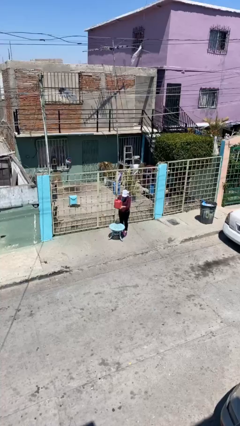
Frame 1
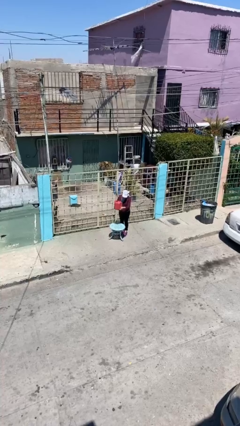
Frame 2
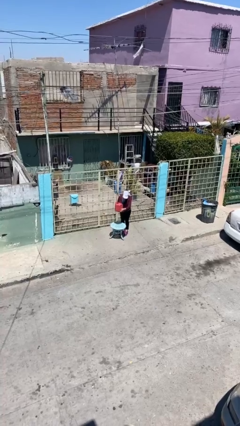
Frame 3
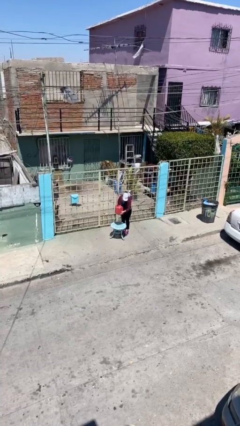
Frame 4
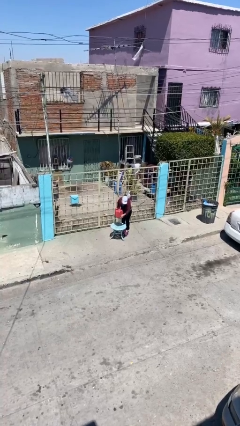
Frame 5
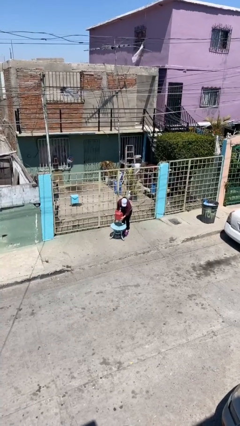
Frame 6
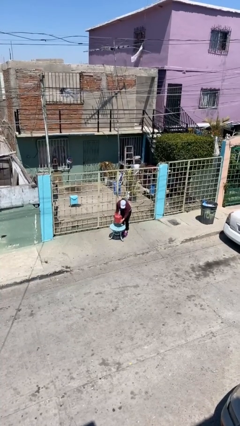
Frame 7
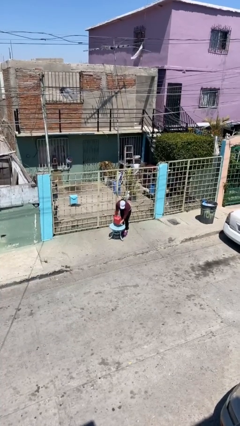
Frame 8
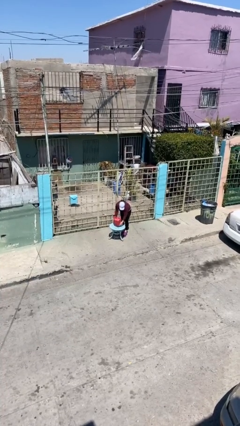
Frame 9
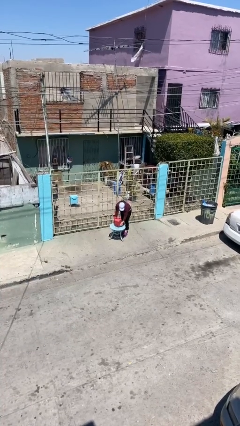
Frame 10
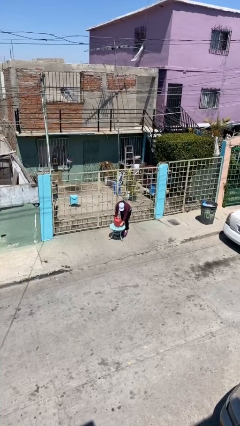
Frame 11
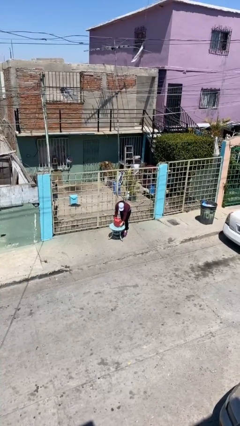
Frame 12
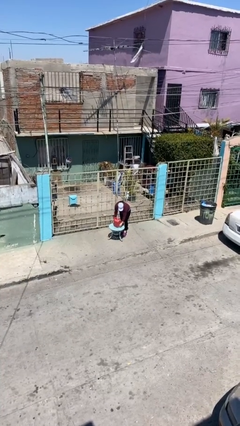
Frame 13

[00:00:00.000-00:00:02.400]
person puts down object on table

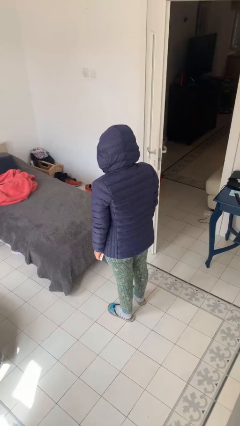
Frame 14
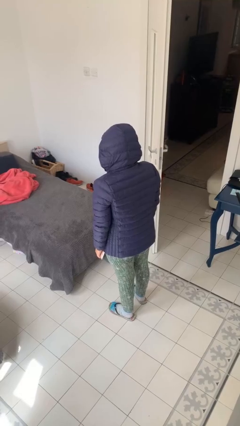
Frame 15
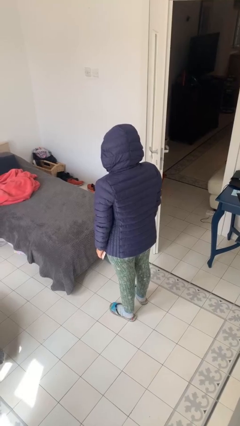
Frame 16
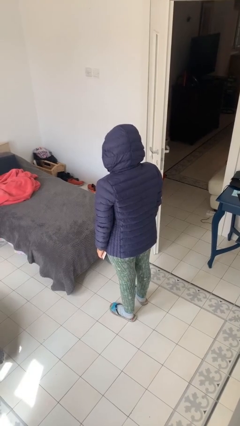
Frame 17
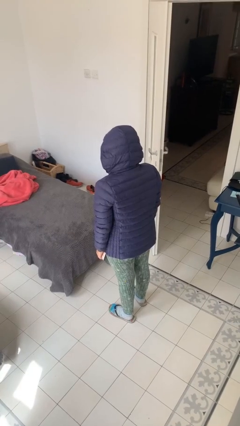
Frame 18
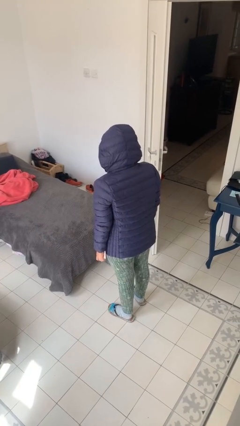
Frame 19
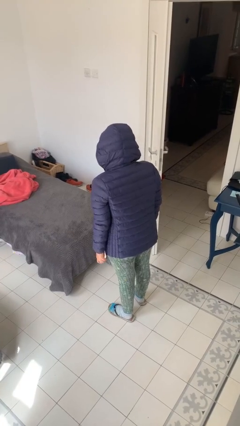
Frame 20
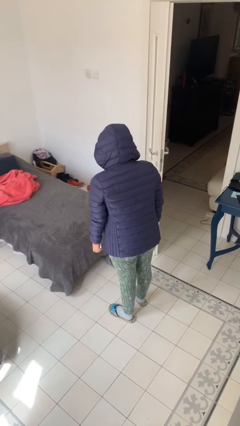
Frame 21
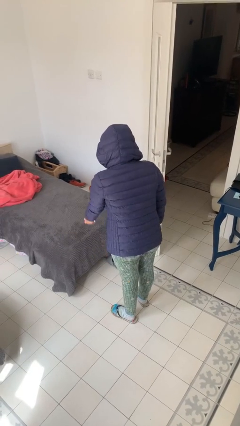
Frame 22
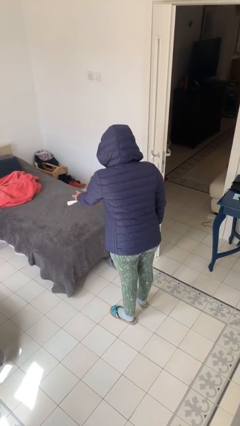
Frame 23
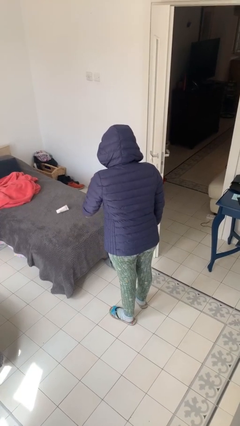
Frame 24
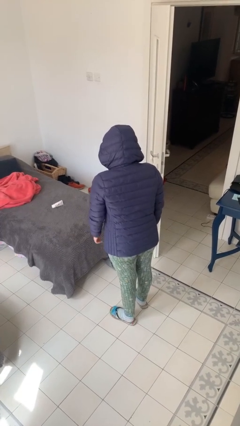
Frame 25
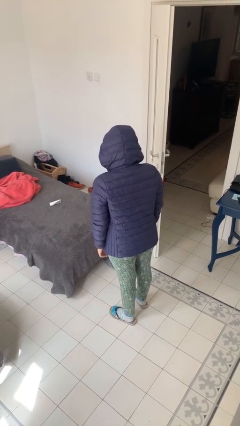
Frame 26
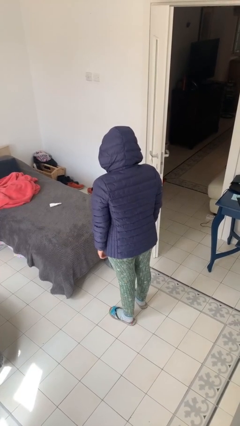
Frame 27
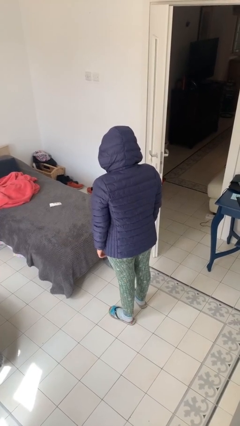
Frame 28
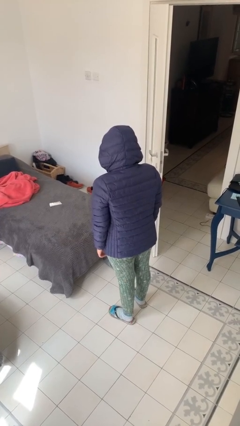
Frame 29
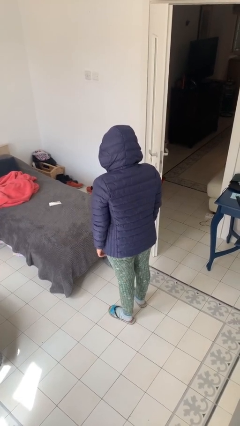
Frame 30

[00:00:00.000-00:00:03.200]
person throws object on bed

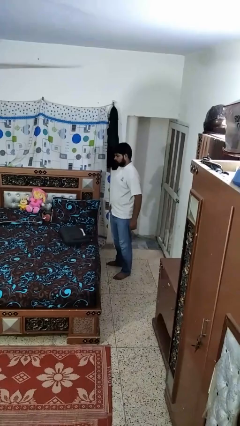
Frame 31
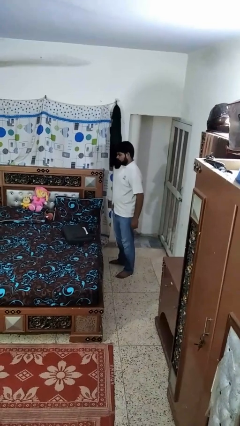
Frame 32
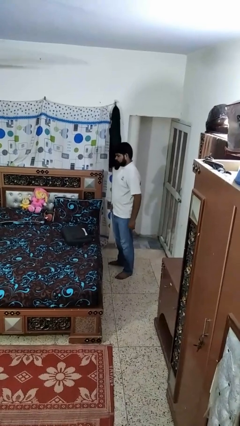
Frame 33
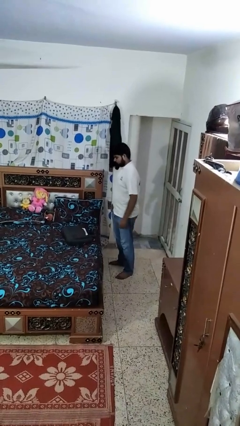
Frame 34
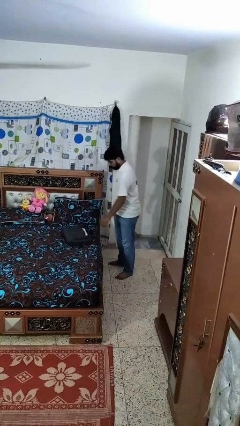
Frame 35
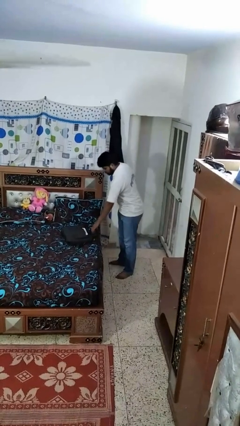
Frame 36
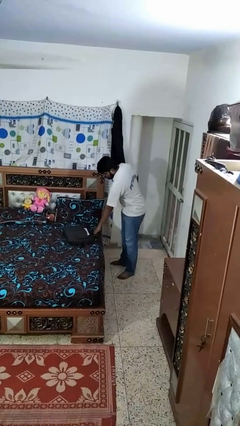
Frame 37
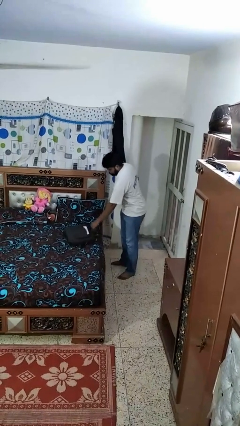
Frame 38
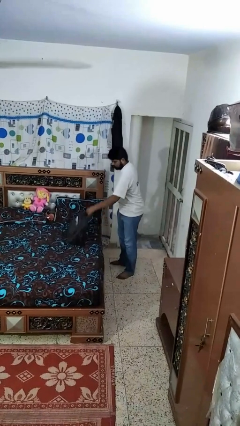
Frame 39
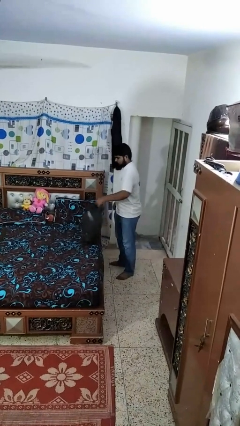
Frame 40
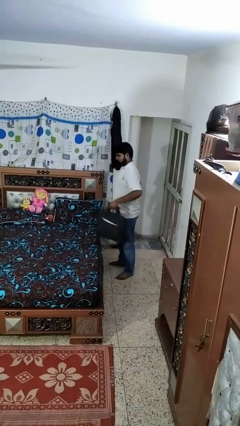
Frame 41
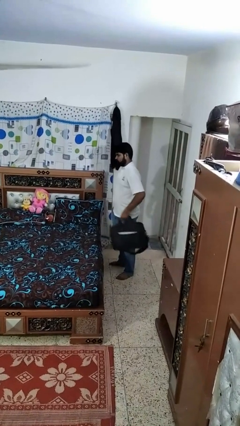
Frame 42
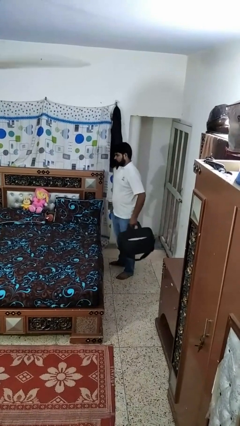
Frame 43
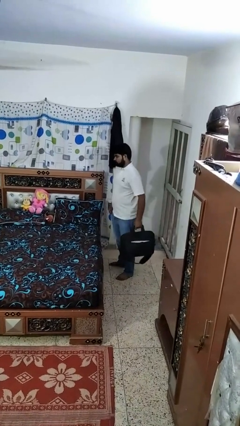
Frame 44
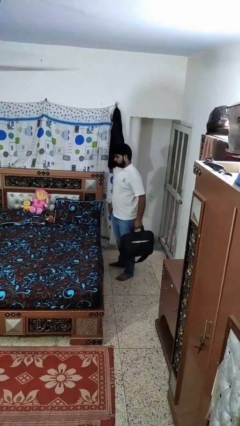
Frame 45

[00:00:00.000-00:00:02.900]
person picks up object from bed

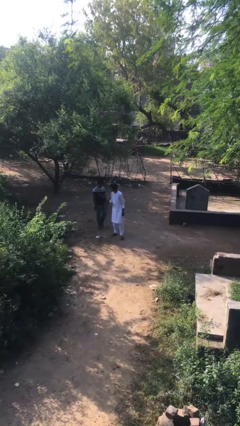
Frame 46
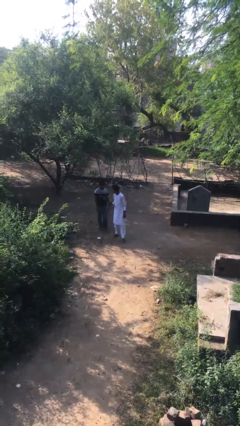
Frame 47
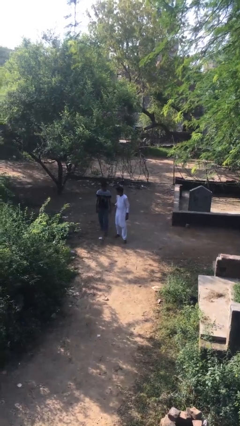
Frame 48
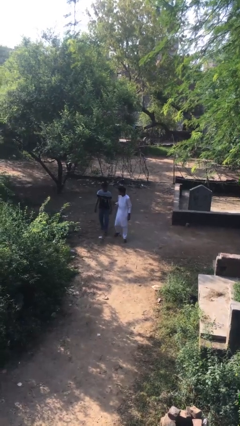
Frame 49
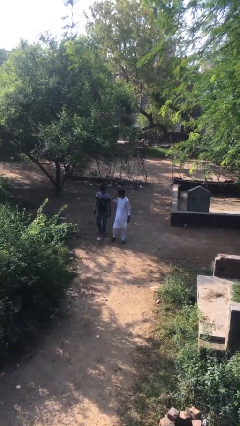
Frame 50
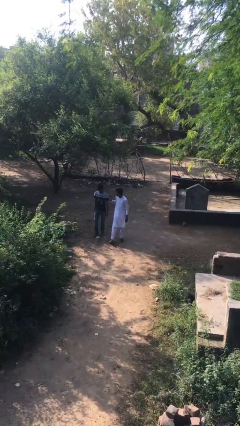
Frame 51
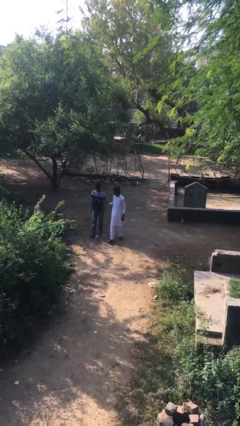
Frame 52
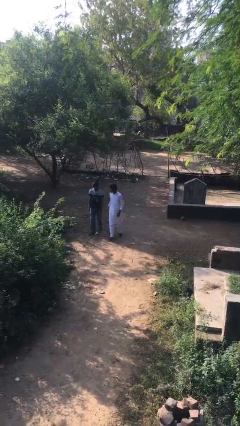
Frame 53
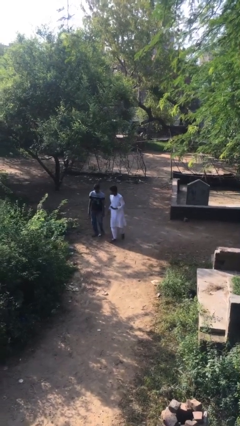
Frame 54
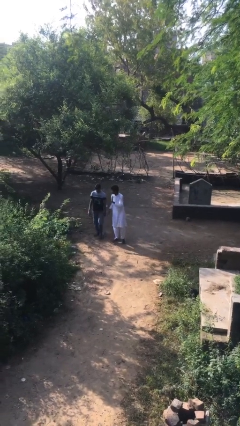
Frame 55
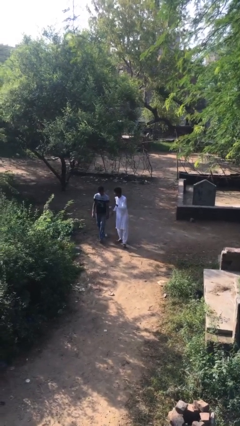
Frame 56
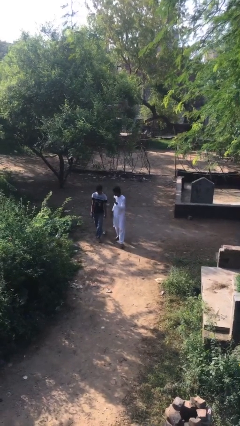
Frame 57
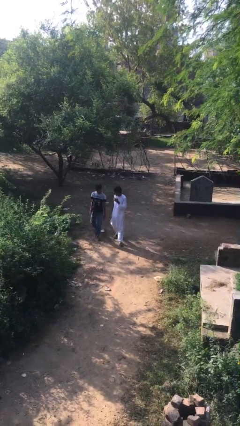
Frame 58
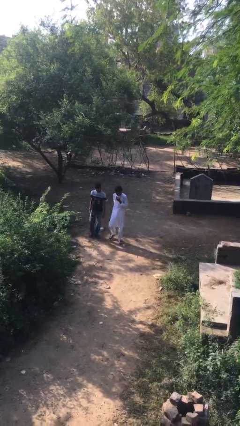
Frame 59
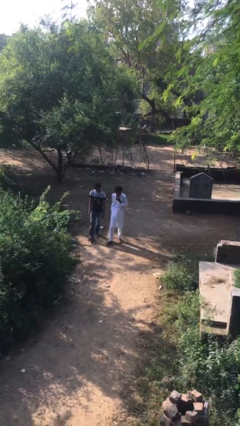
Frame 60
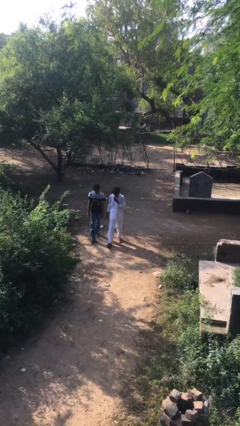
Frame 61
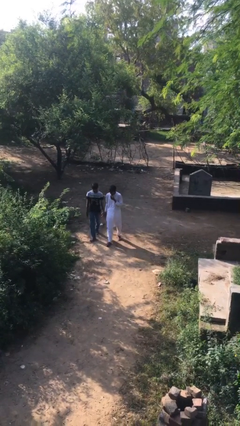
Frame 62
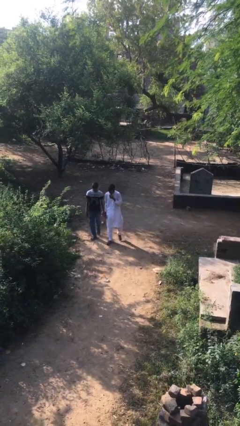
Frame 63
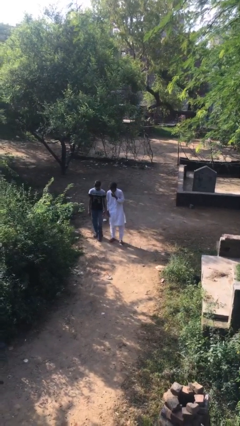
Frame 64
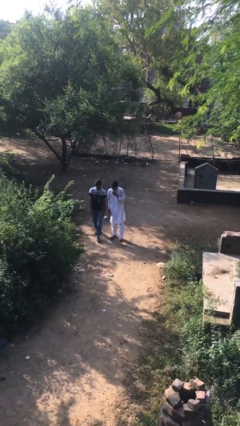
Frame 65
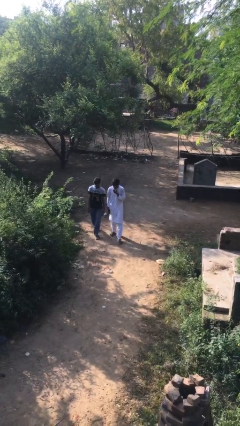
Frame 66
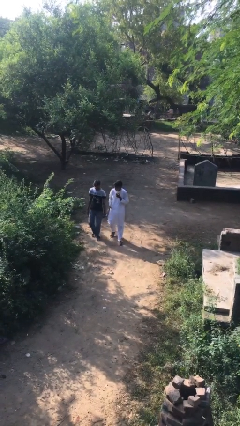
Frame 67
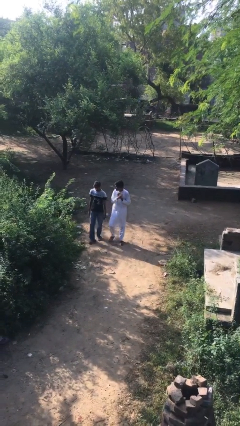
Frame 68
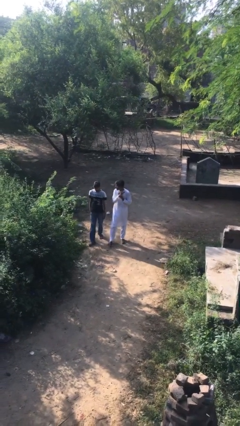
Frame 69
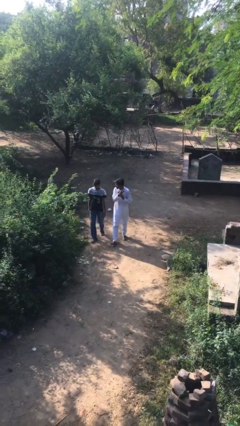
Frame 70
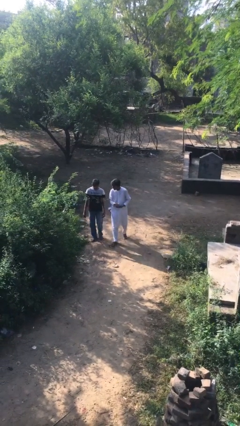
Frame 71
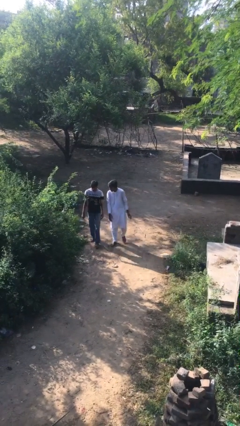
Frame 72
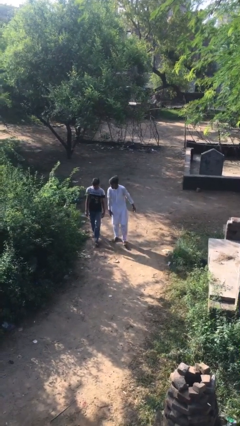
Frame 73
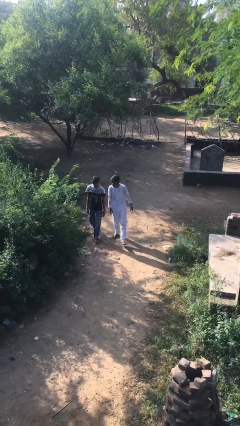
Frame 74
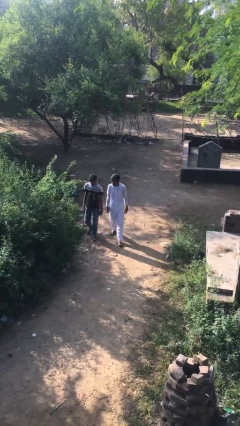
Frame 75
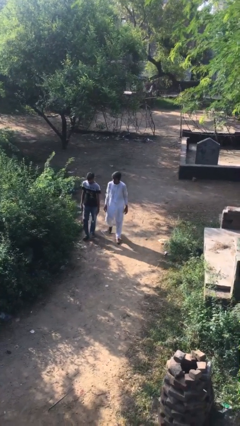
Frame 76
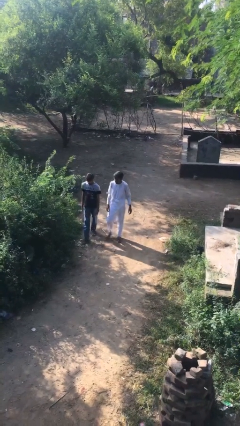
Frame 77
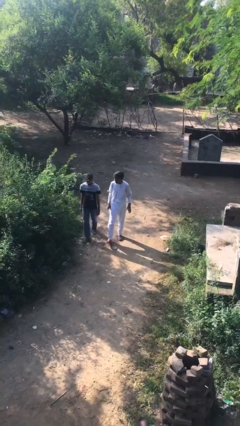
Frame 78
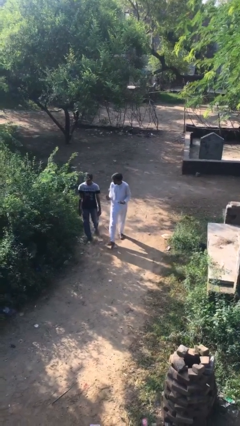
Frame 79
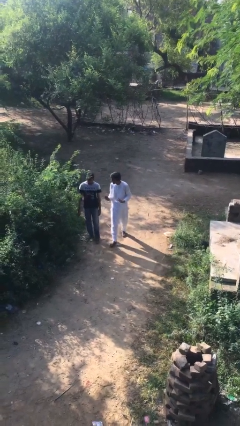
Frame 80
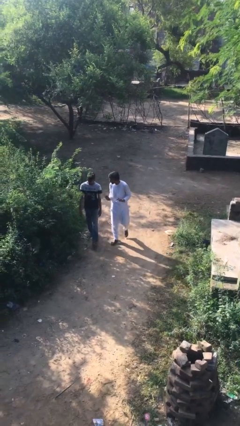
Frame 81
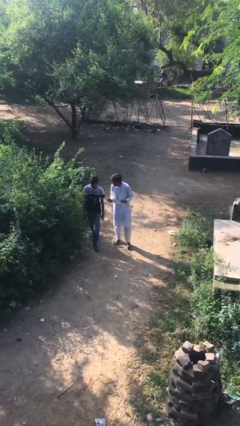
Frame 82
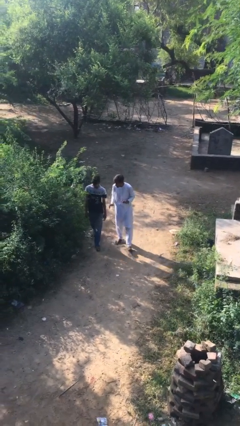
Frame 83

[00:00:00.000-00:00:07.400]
person talks to person

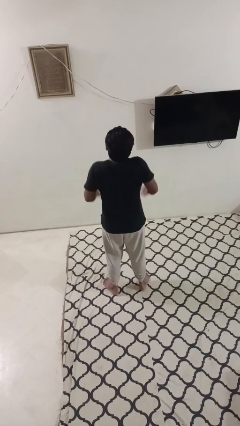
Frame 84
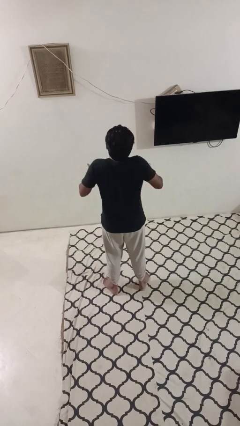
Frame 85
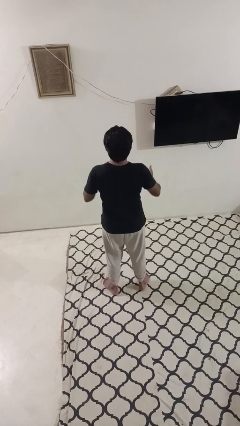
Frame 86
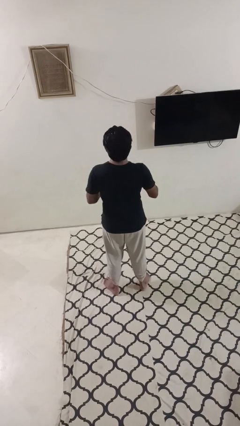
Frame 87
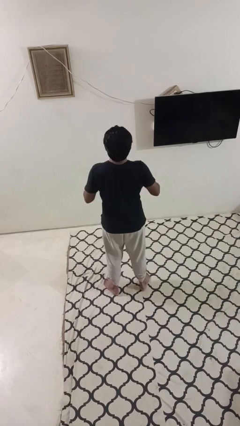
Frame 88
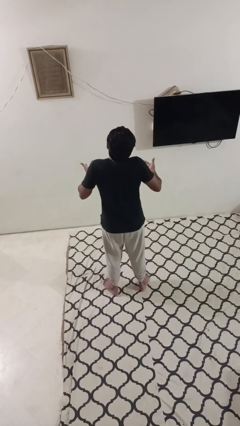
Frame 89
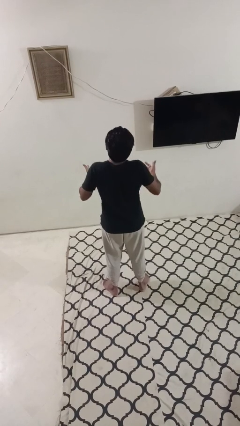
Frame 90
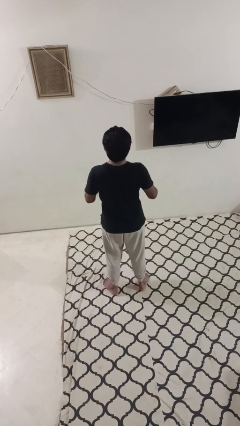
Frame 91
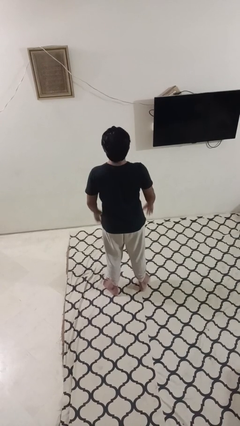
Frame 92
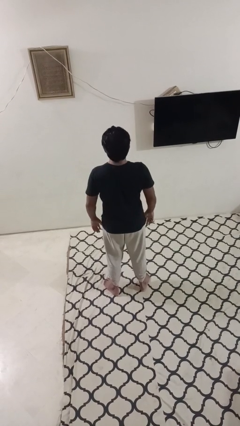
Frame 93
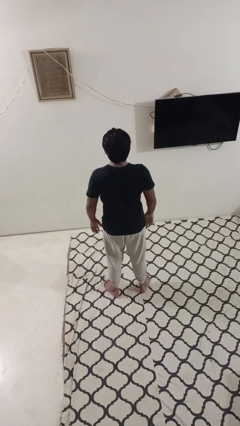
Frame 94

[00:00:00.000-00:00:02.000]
person shrugs
